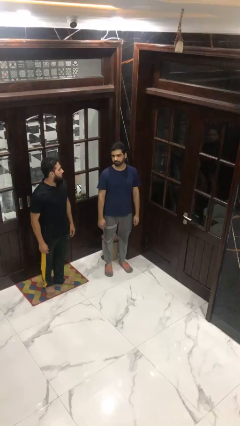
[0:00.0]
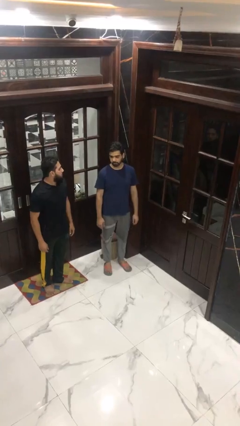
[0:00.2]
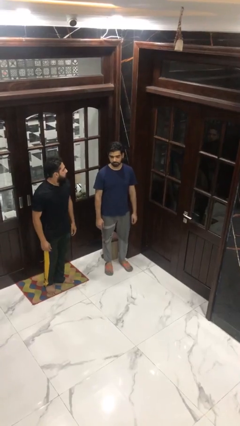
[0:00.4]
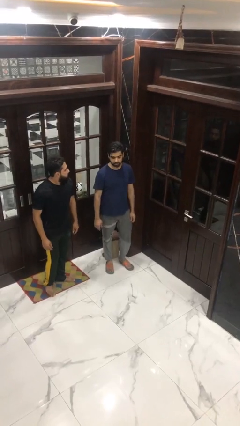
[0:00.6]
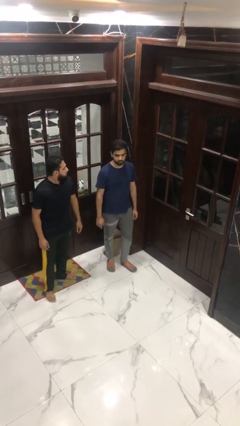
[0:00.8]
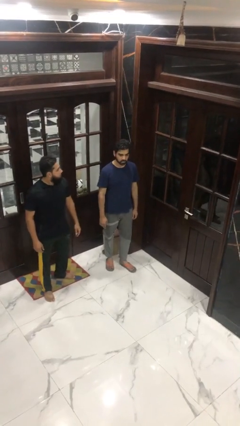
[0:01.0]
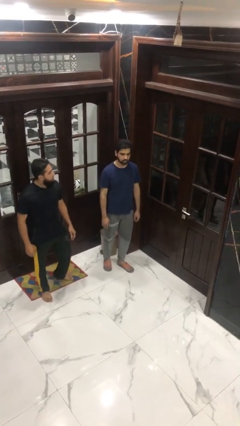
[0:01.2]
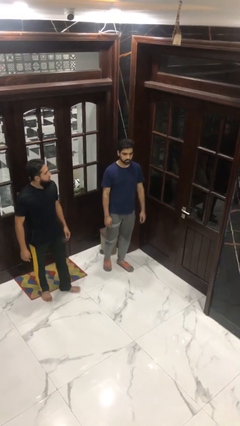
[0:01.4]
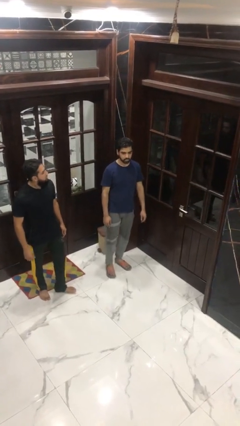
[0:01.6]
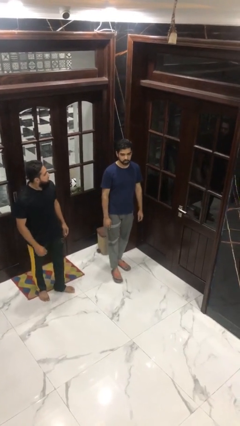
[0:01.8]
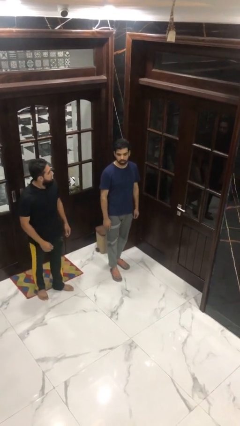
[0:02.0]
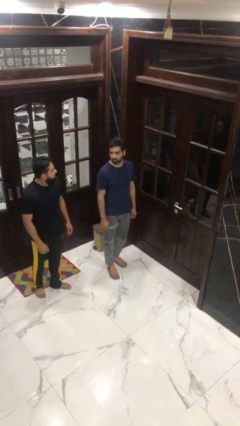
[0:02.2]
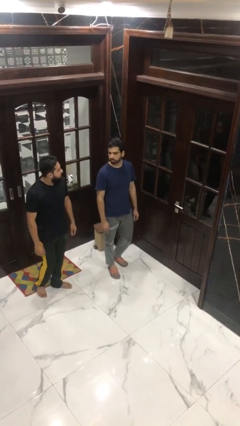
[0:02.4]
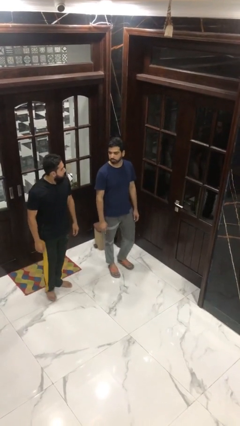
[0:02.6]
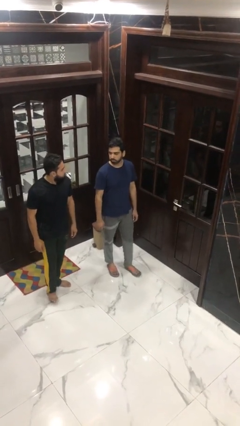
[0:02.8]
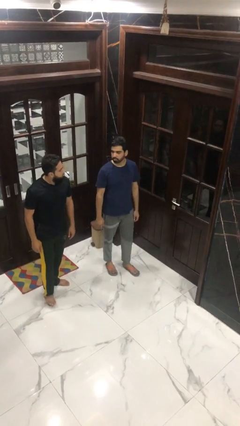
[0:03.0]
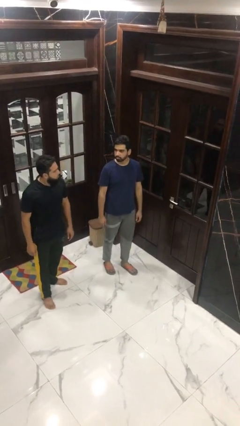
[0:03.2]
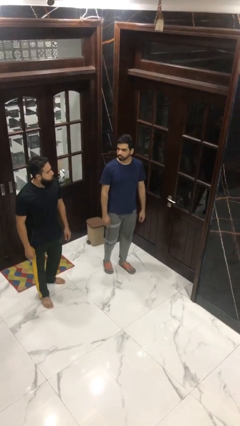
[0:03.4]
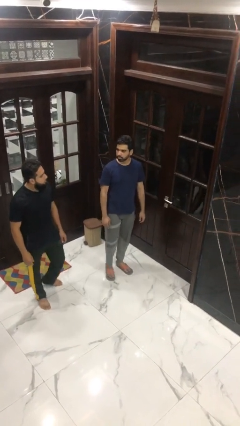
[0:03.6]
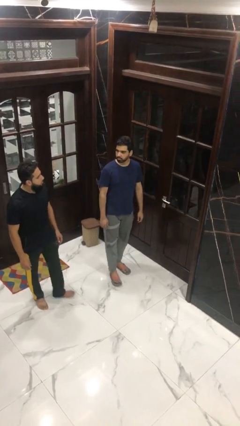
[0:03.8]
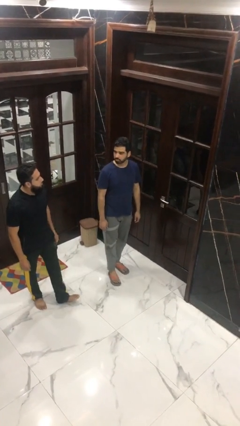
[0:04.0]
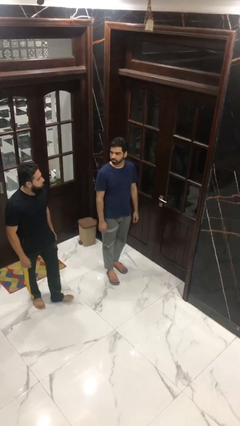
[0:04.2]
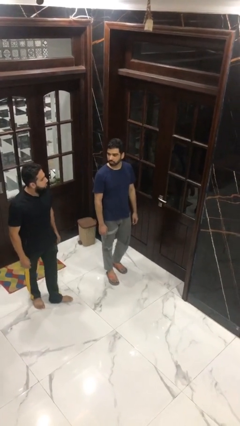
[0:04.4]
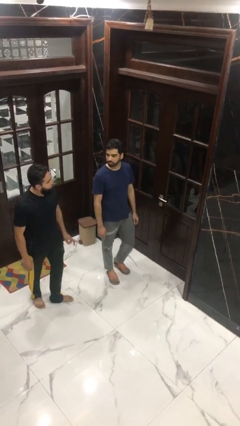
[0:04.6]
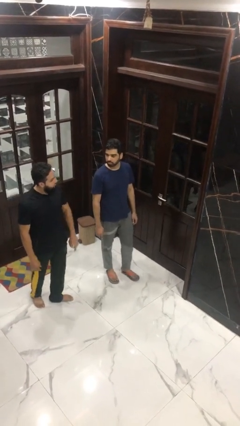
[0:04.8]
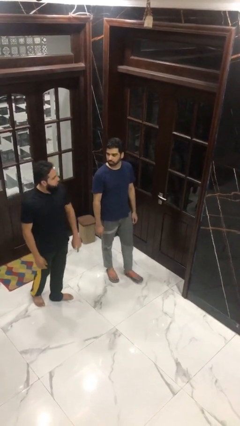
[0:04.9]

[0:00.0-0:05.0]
person talks to person

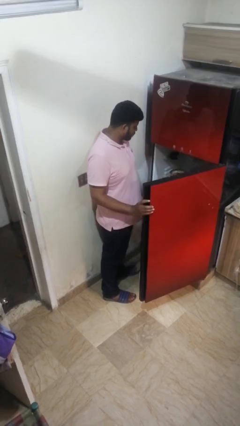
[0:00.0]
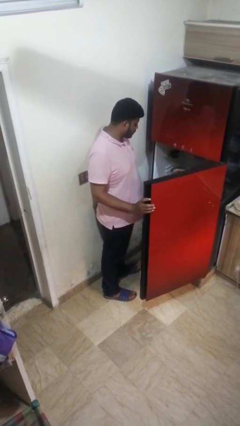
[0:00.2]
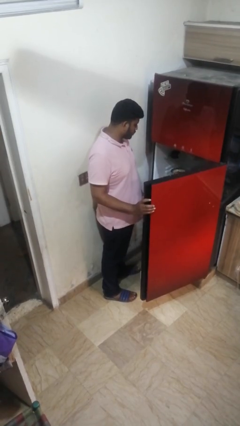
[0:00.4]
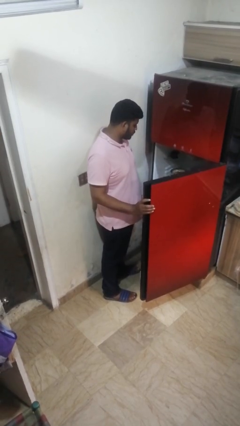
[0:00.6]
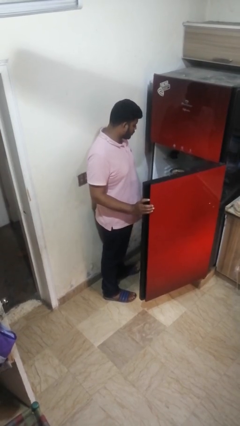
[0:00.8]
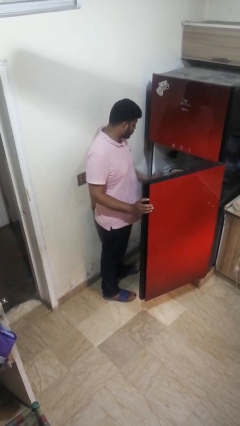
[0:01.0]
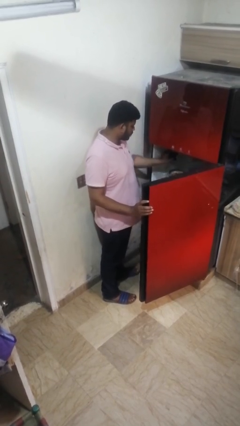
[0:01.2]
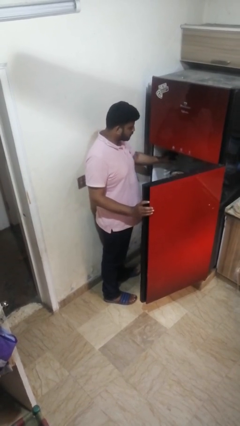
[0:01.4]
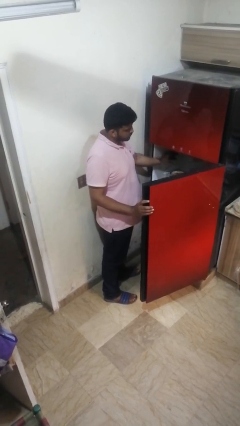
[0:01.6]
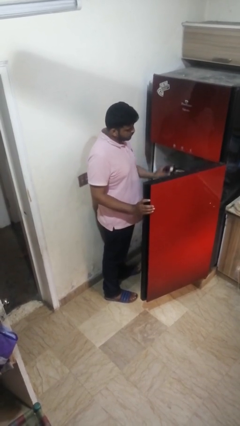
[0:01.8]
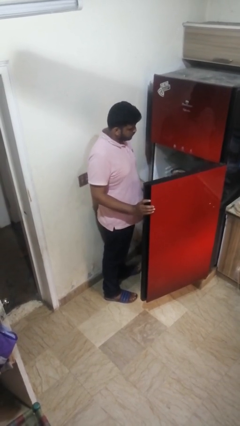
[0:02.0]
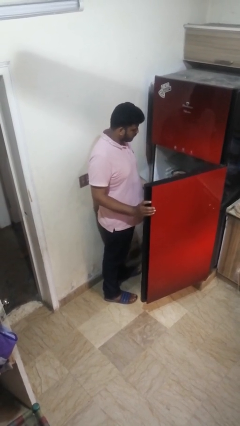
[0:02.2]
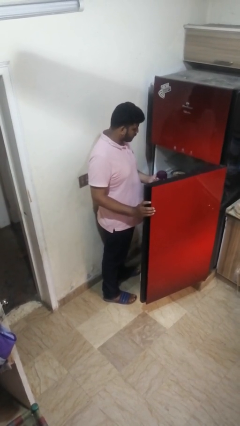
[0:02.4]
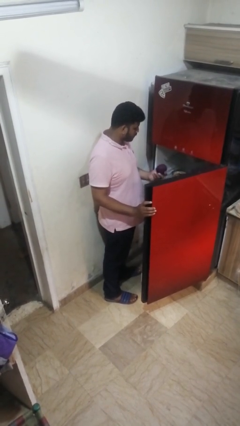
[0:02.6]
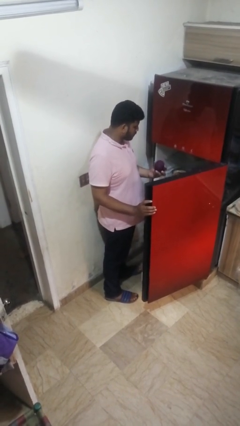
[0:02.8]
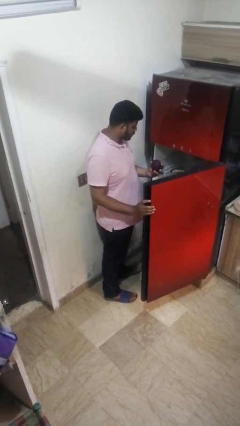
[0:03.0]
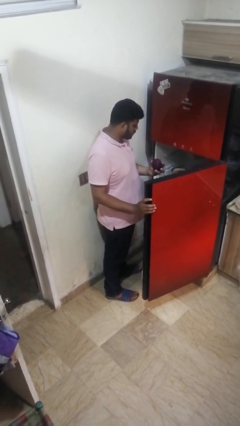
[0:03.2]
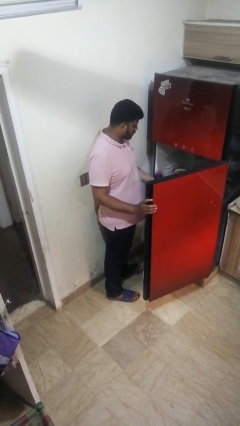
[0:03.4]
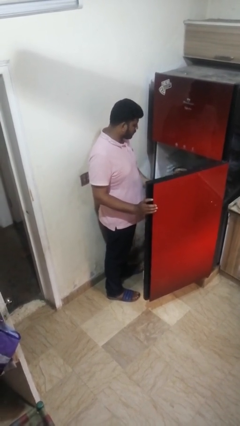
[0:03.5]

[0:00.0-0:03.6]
person takes object from refrigerator

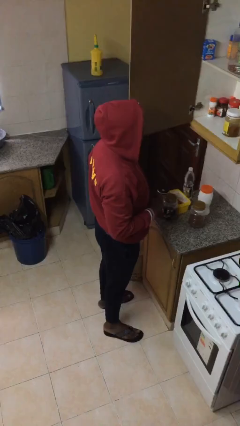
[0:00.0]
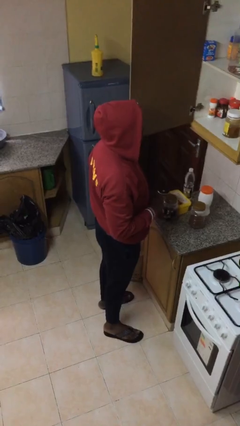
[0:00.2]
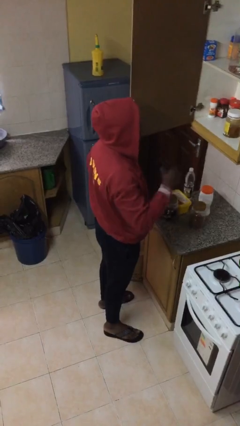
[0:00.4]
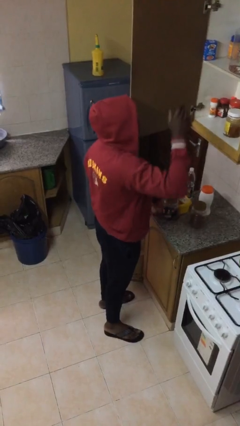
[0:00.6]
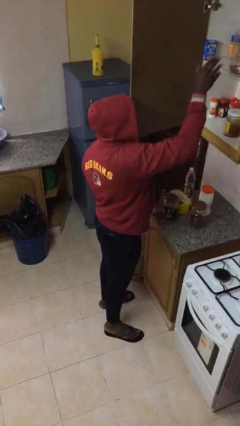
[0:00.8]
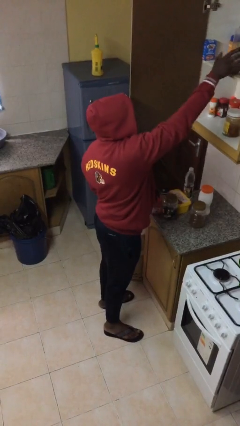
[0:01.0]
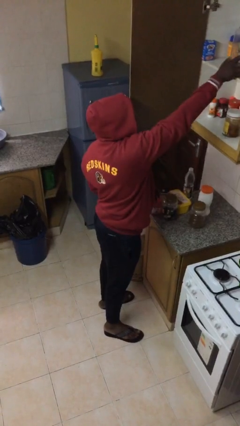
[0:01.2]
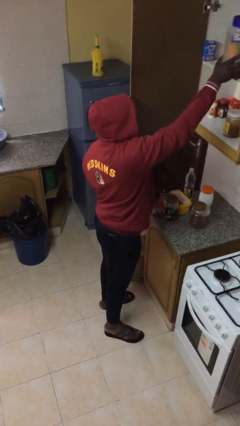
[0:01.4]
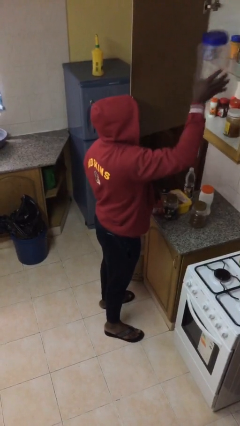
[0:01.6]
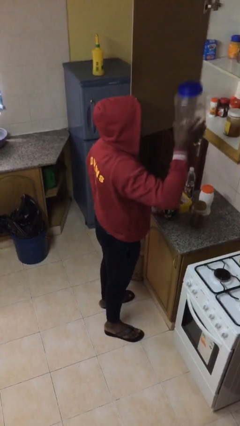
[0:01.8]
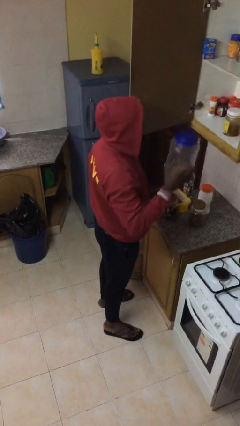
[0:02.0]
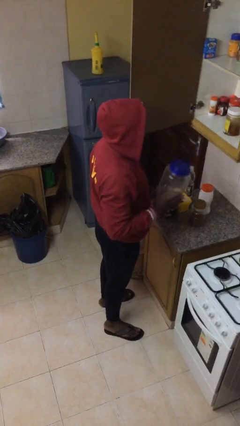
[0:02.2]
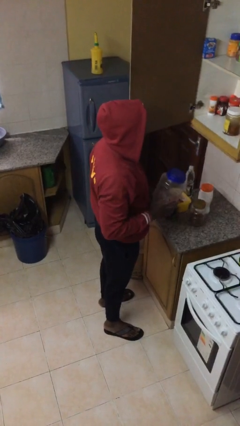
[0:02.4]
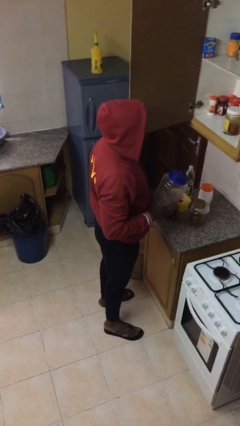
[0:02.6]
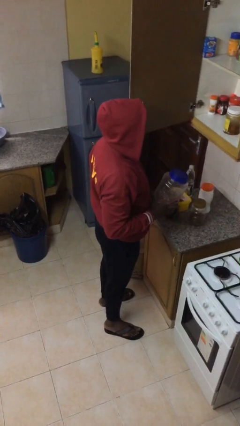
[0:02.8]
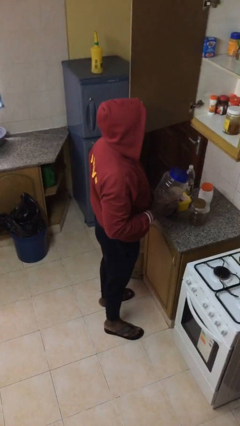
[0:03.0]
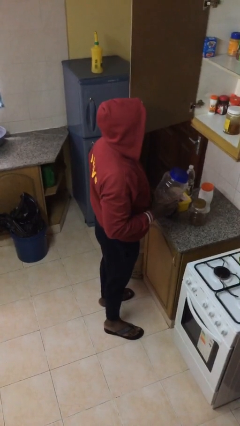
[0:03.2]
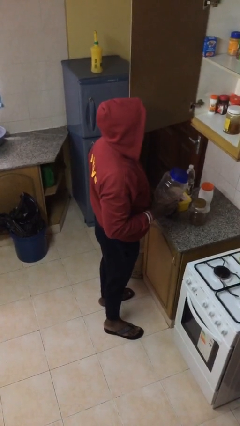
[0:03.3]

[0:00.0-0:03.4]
person picks up object from shelf

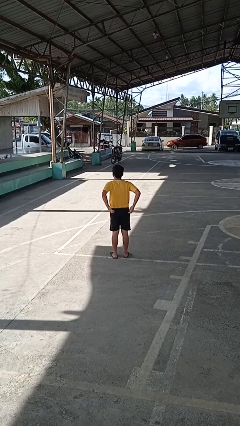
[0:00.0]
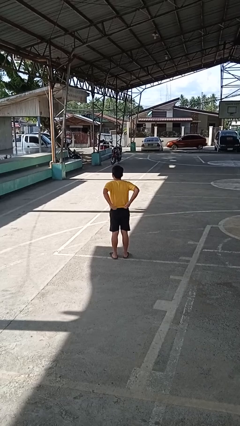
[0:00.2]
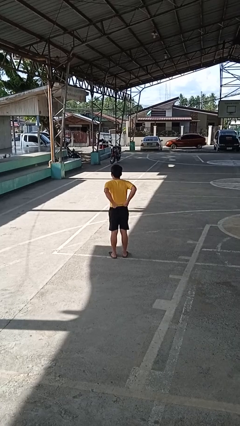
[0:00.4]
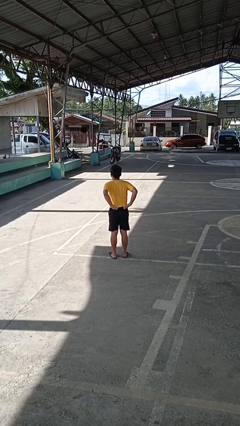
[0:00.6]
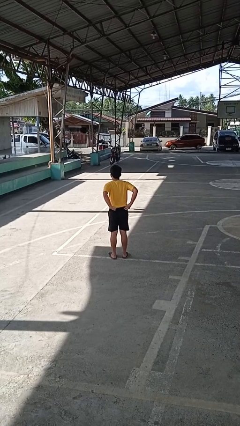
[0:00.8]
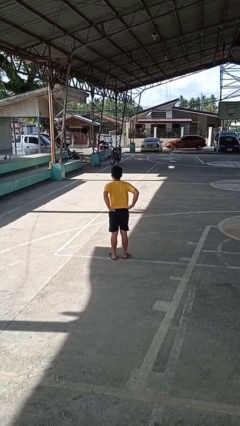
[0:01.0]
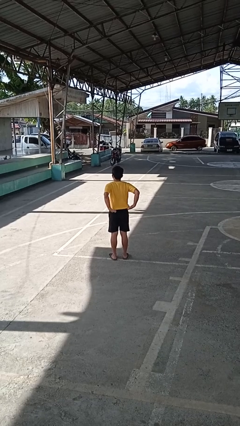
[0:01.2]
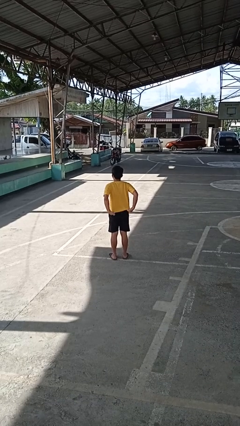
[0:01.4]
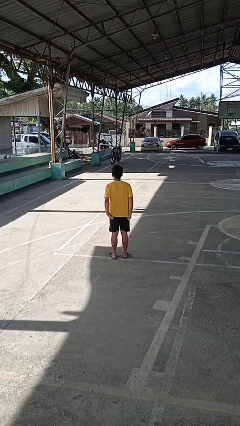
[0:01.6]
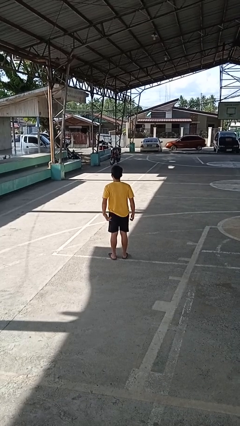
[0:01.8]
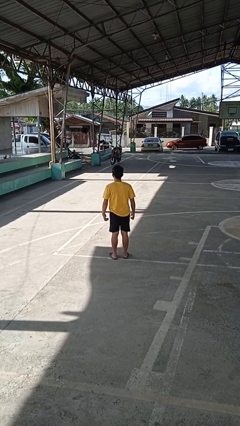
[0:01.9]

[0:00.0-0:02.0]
person untucks shirt

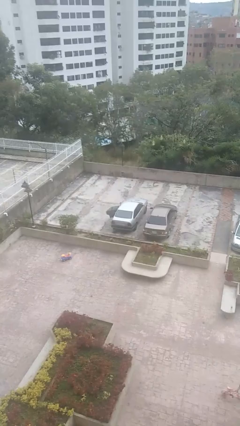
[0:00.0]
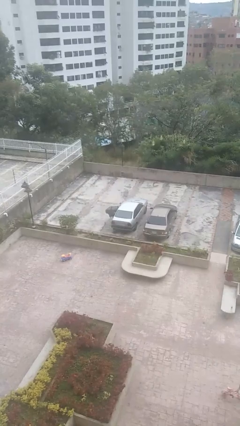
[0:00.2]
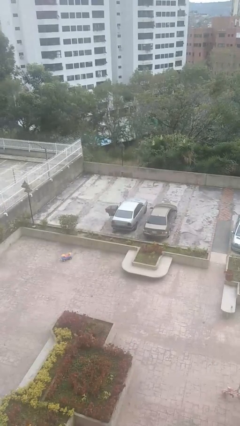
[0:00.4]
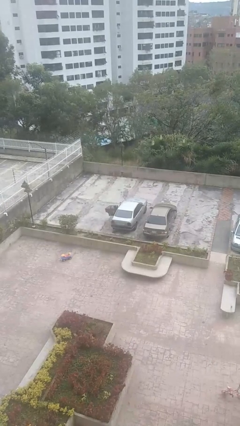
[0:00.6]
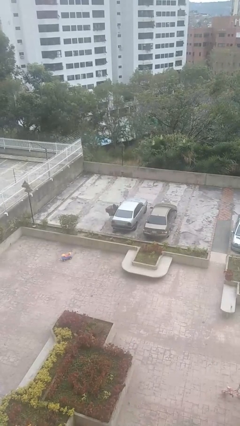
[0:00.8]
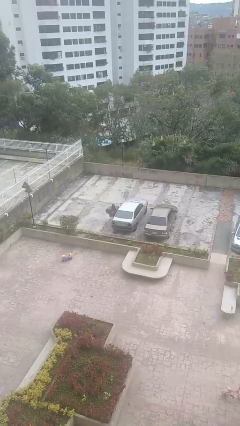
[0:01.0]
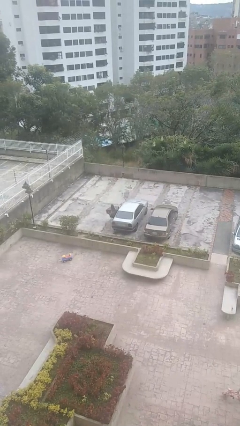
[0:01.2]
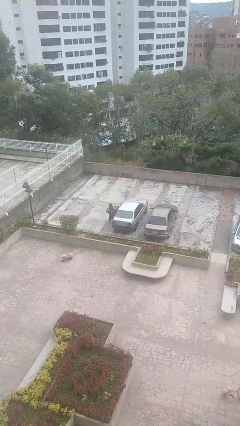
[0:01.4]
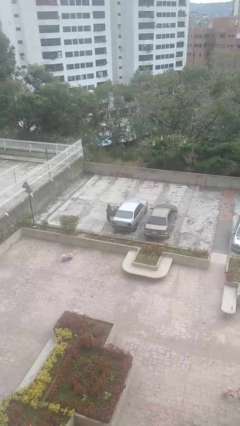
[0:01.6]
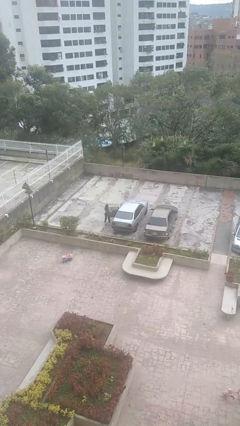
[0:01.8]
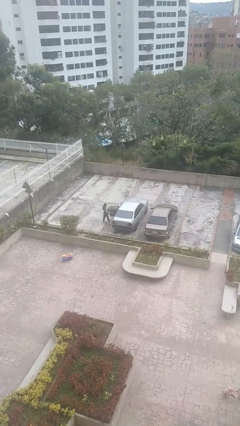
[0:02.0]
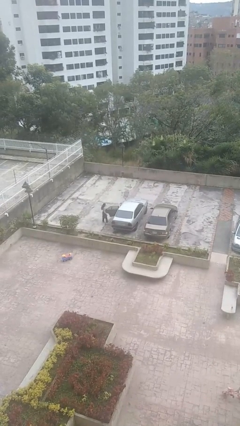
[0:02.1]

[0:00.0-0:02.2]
car drops off person

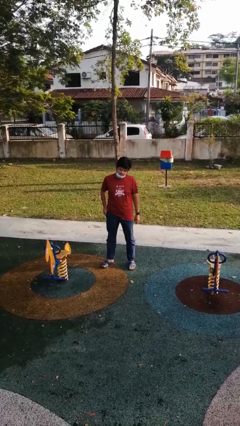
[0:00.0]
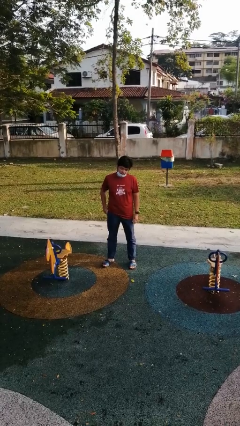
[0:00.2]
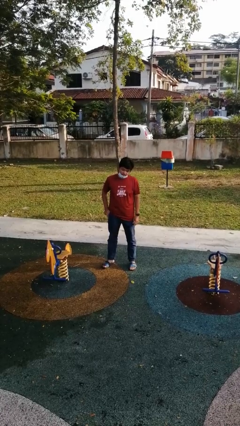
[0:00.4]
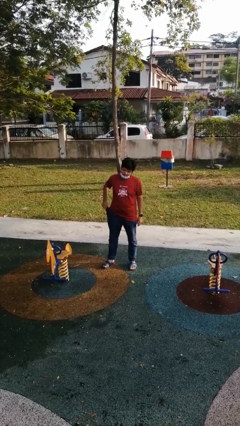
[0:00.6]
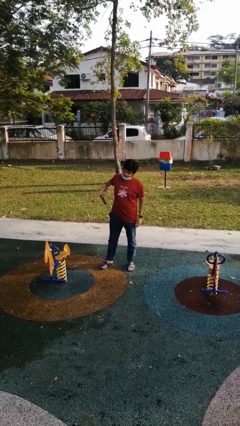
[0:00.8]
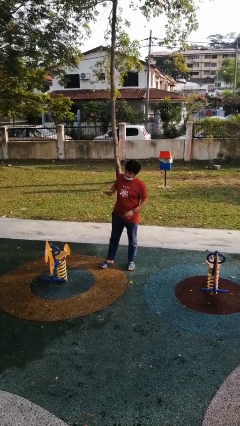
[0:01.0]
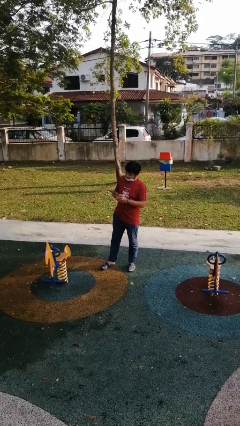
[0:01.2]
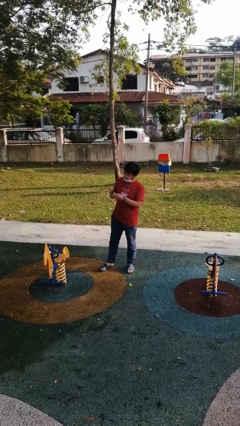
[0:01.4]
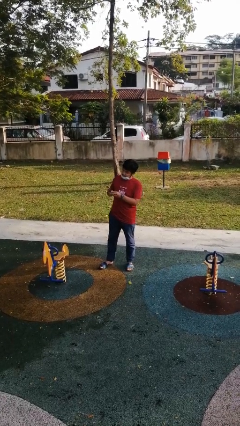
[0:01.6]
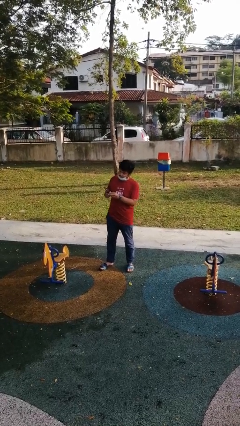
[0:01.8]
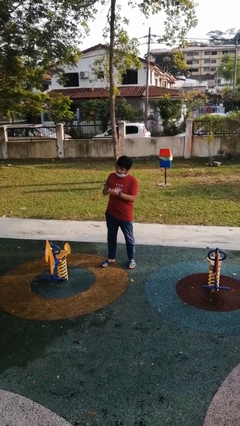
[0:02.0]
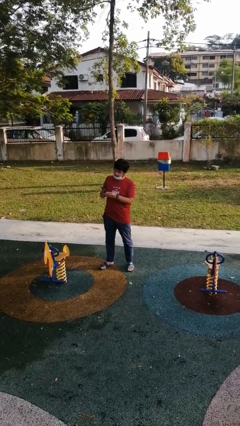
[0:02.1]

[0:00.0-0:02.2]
person takes phone from pocket
